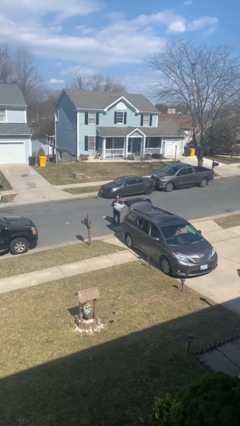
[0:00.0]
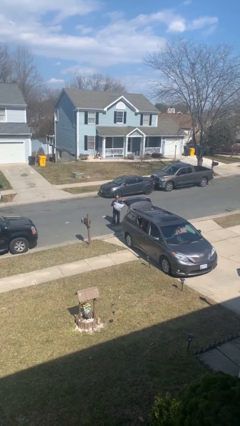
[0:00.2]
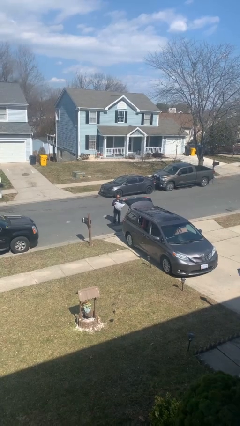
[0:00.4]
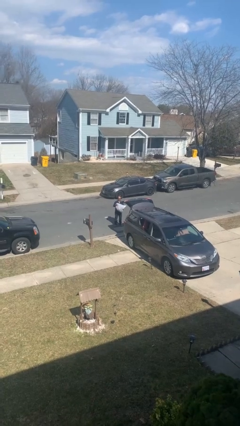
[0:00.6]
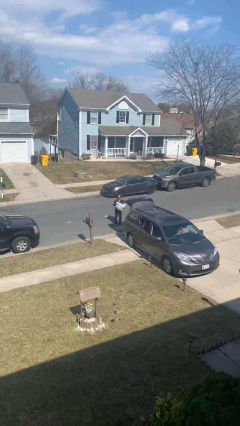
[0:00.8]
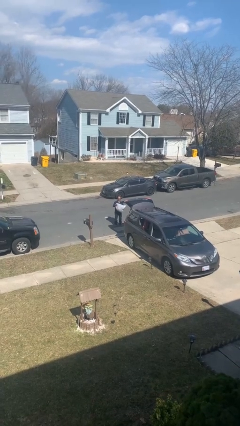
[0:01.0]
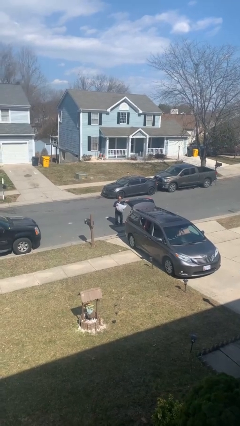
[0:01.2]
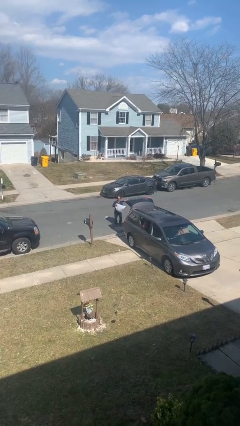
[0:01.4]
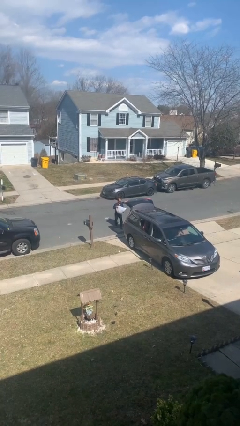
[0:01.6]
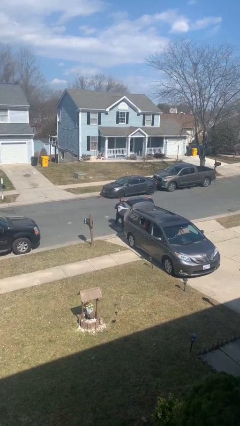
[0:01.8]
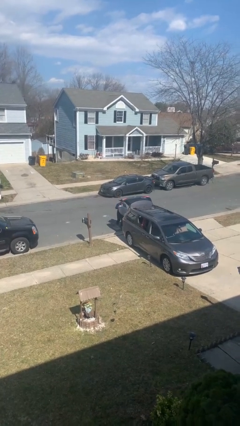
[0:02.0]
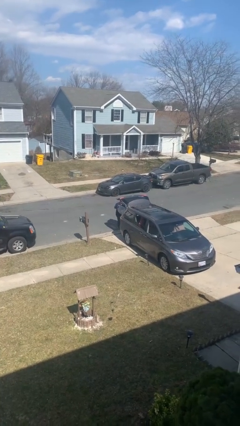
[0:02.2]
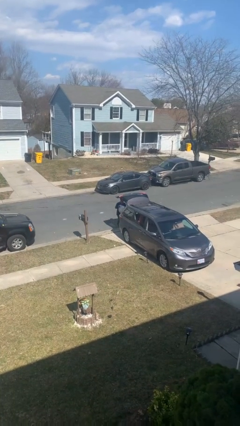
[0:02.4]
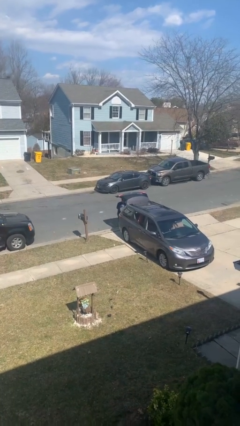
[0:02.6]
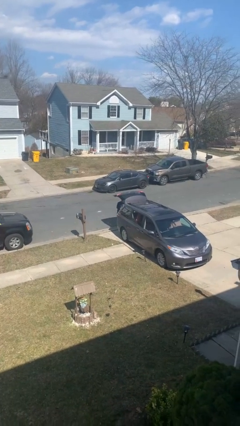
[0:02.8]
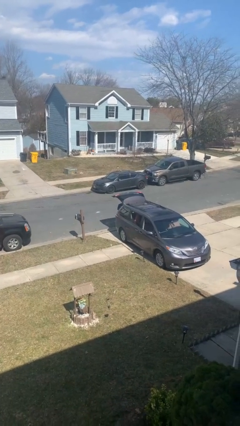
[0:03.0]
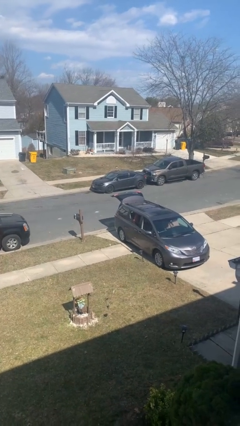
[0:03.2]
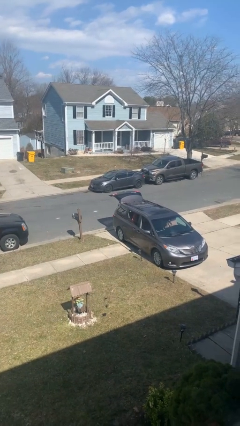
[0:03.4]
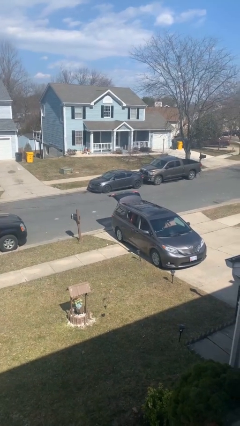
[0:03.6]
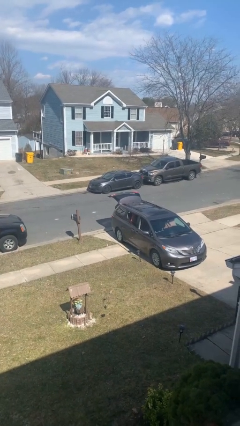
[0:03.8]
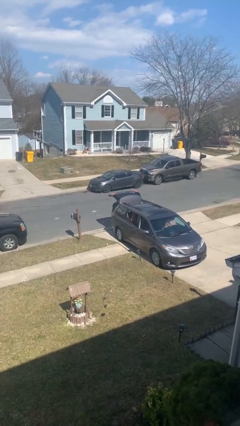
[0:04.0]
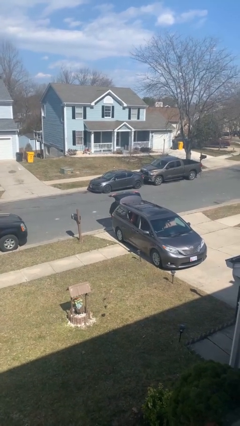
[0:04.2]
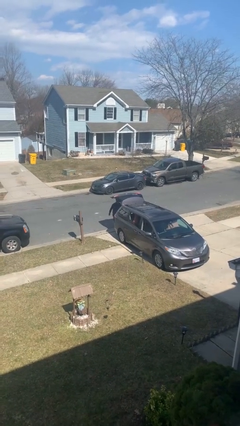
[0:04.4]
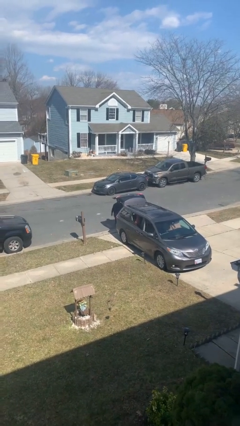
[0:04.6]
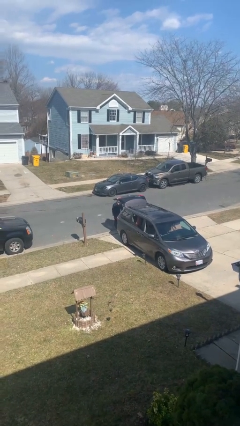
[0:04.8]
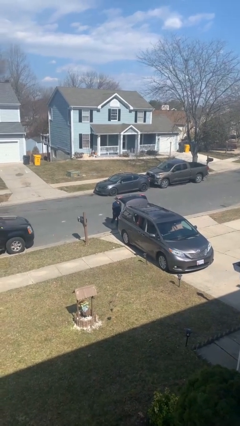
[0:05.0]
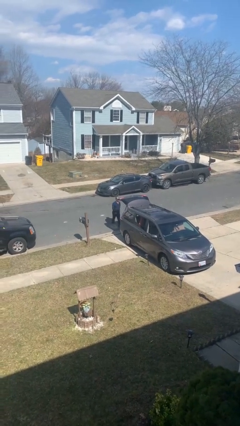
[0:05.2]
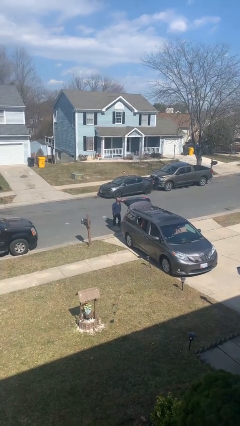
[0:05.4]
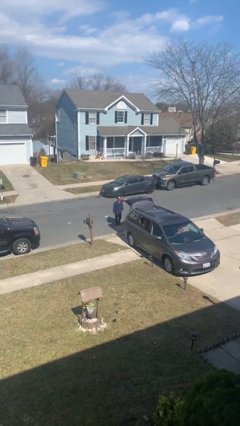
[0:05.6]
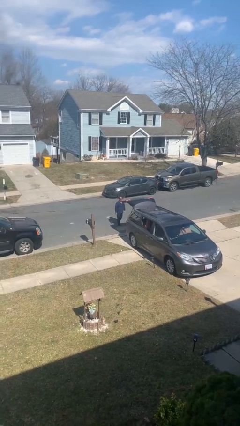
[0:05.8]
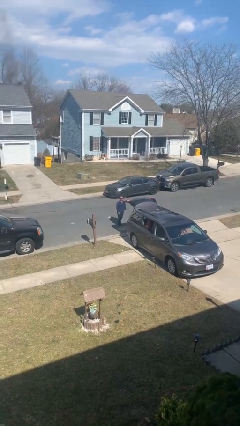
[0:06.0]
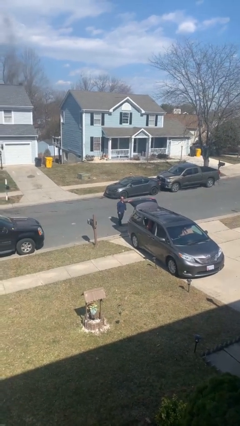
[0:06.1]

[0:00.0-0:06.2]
person loads car

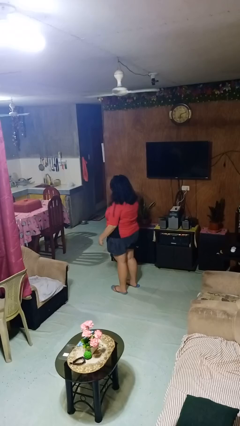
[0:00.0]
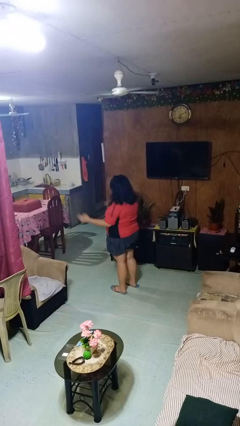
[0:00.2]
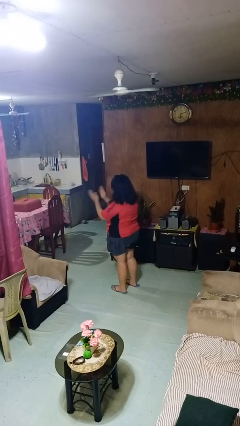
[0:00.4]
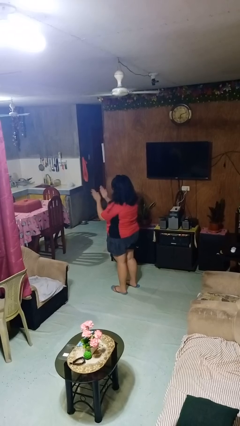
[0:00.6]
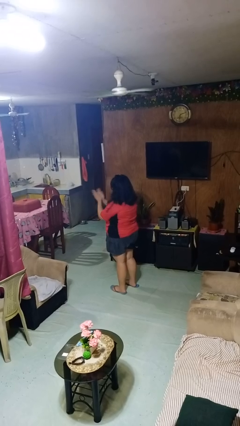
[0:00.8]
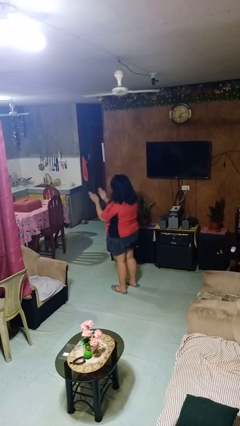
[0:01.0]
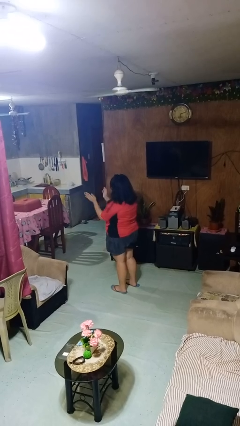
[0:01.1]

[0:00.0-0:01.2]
person claps hands

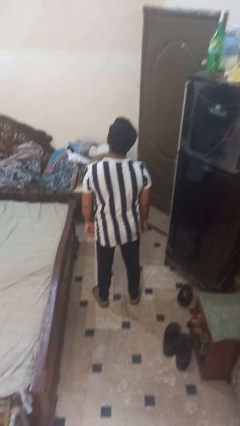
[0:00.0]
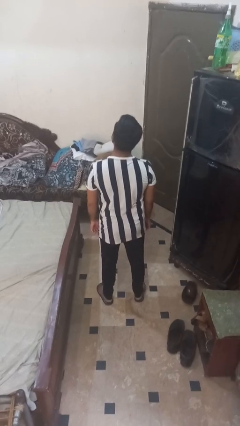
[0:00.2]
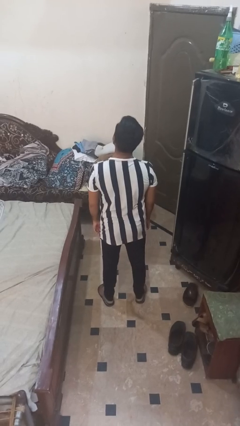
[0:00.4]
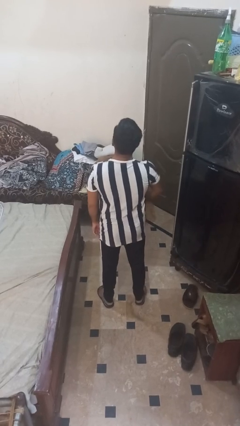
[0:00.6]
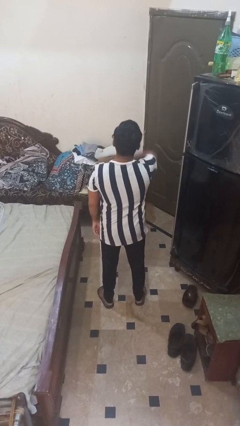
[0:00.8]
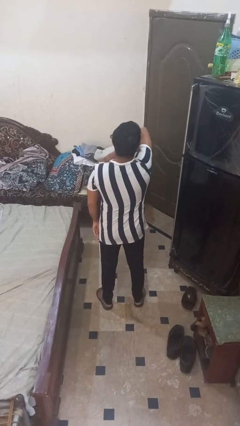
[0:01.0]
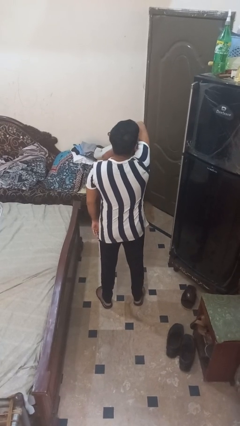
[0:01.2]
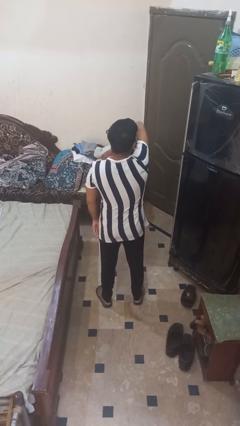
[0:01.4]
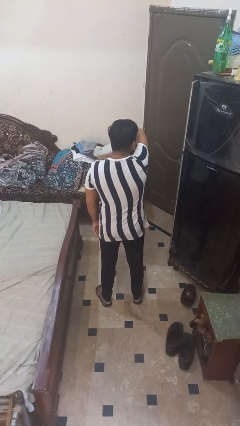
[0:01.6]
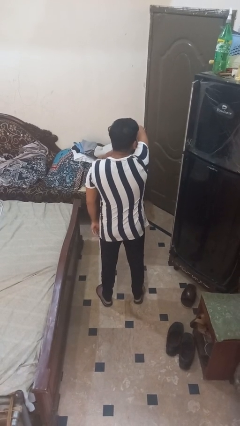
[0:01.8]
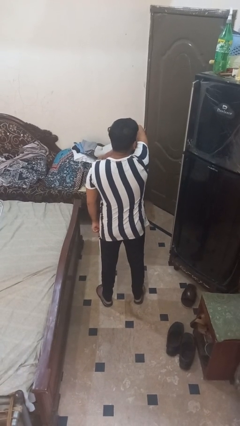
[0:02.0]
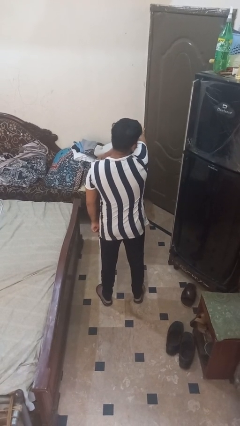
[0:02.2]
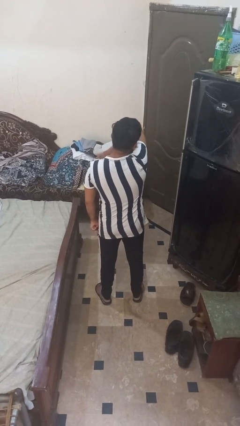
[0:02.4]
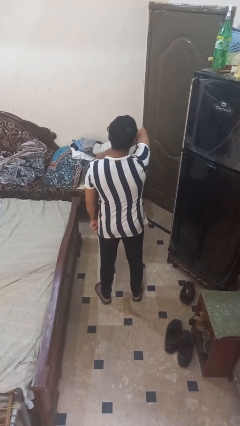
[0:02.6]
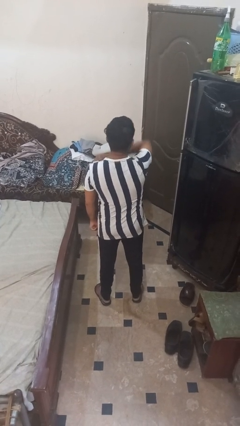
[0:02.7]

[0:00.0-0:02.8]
person sneezes into arm

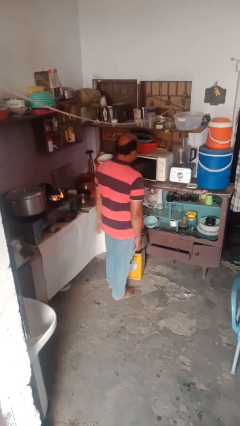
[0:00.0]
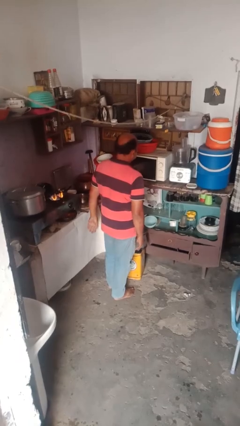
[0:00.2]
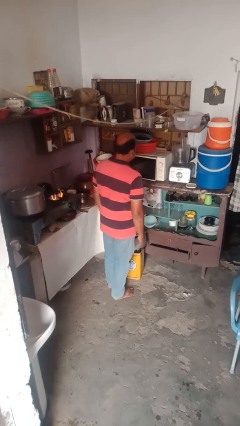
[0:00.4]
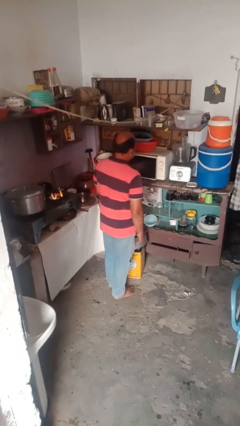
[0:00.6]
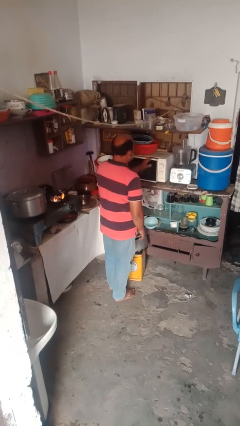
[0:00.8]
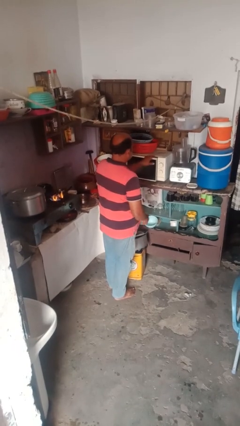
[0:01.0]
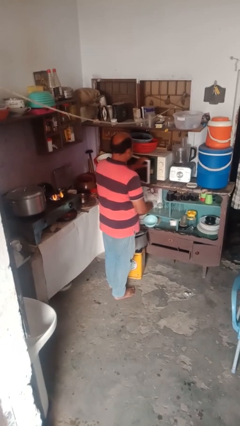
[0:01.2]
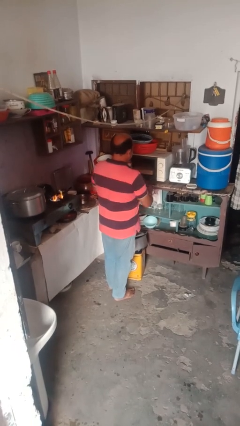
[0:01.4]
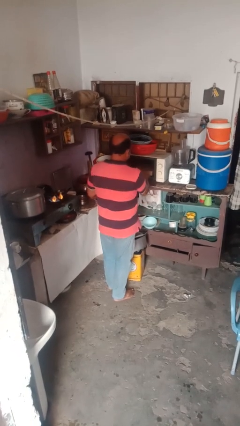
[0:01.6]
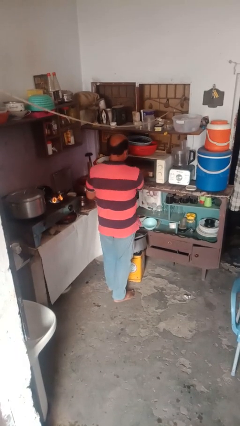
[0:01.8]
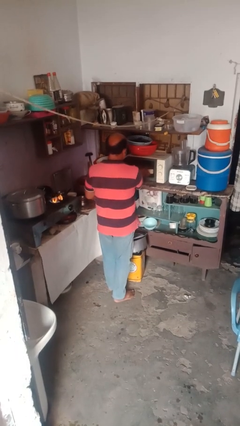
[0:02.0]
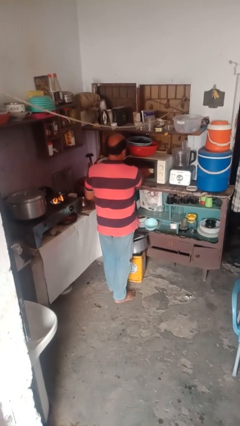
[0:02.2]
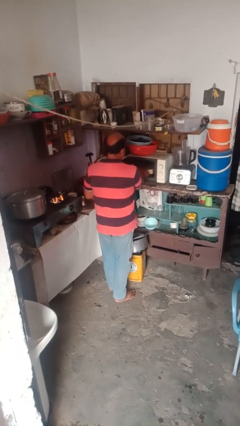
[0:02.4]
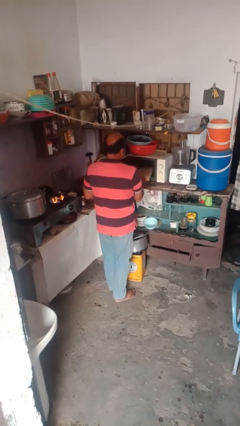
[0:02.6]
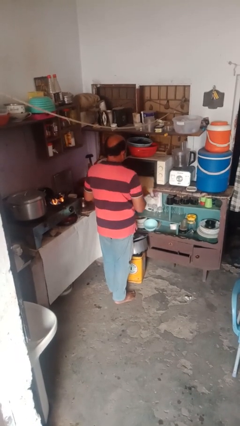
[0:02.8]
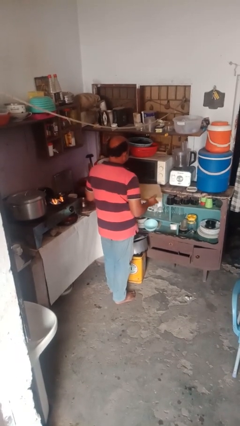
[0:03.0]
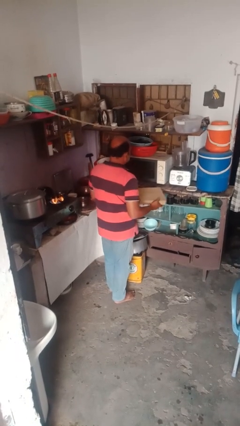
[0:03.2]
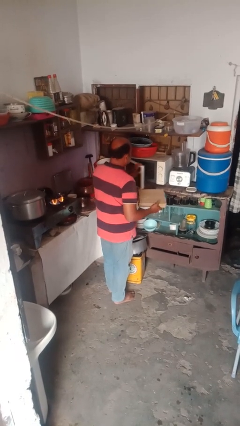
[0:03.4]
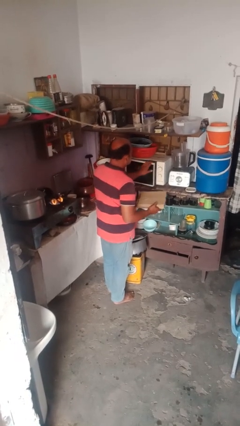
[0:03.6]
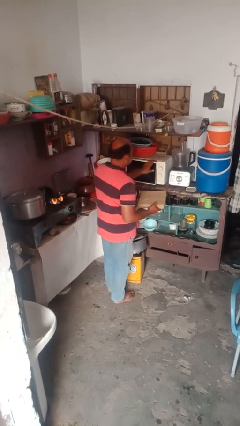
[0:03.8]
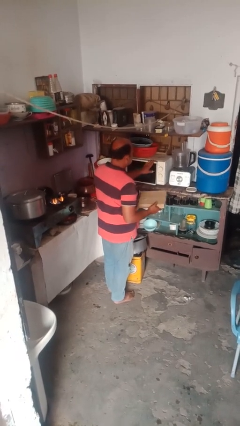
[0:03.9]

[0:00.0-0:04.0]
person takes object from microwave

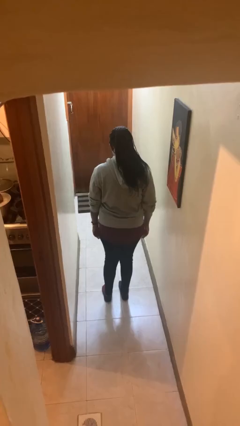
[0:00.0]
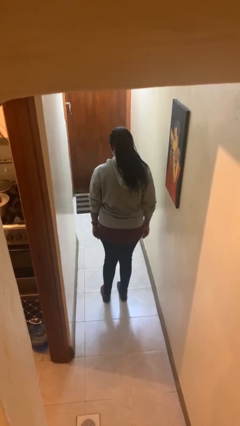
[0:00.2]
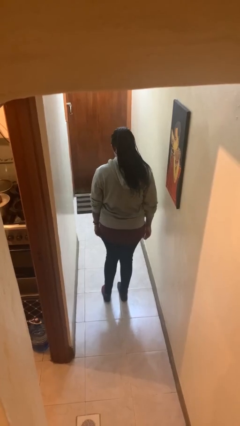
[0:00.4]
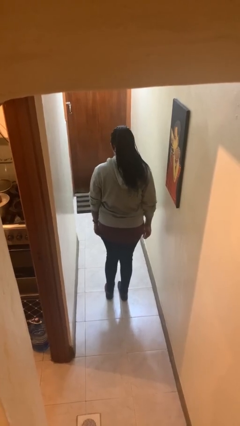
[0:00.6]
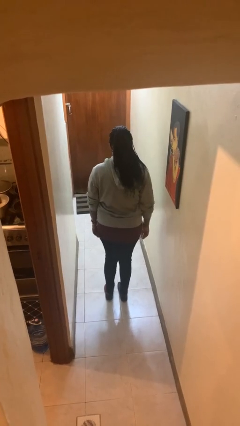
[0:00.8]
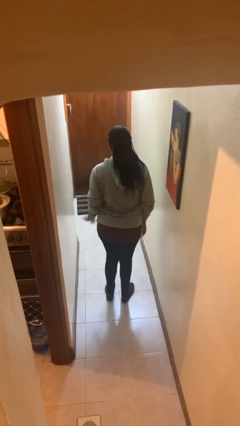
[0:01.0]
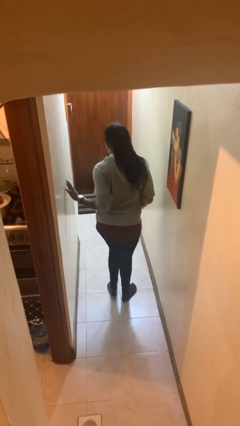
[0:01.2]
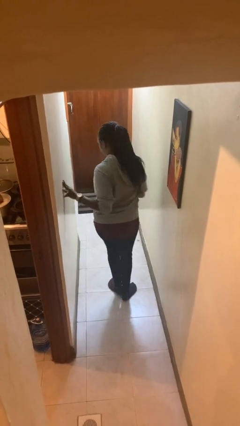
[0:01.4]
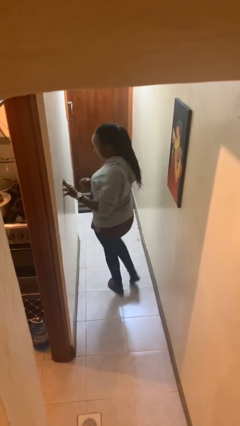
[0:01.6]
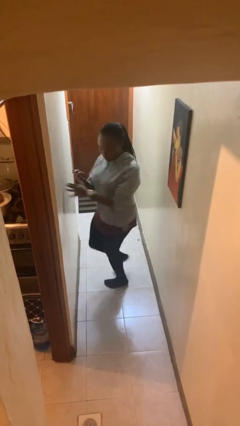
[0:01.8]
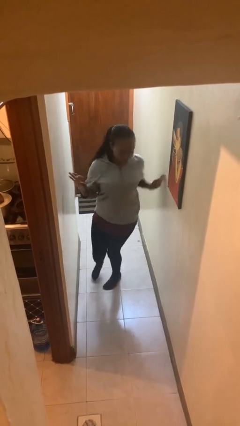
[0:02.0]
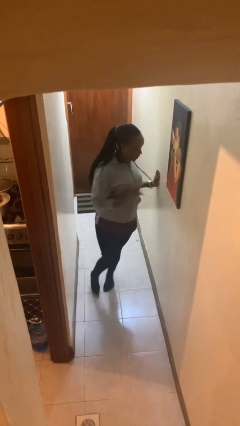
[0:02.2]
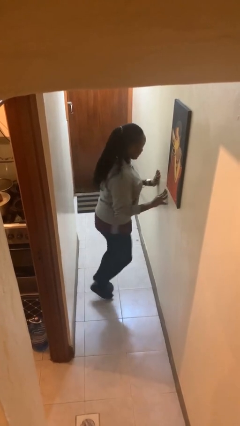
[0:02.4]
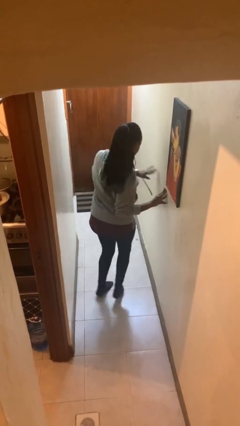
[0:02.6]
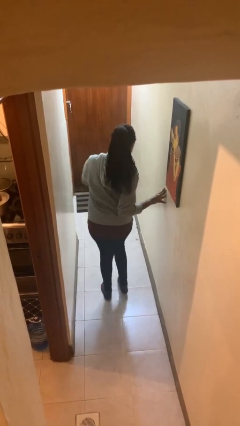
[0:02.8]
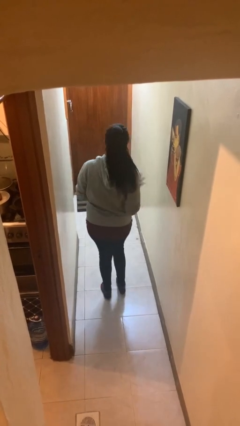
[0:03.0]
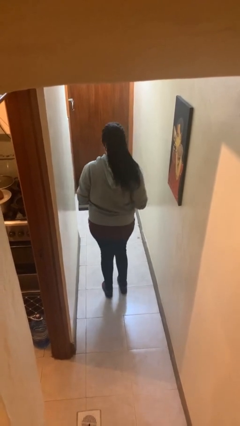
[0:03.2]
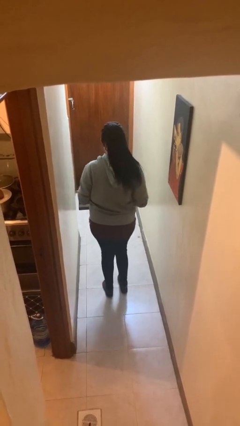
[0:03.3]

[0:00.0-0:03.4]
person twirls
